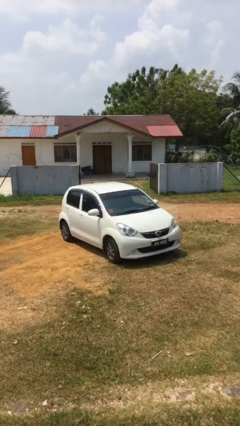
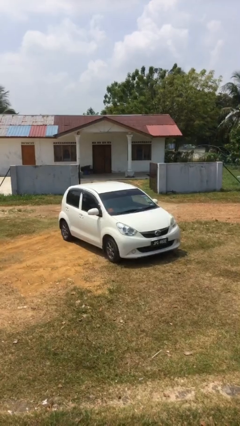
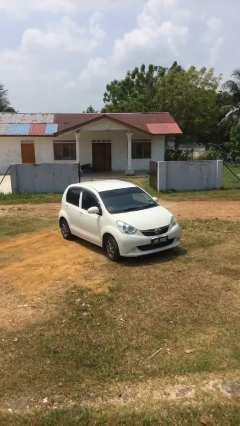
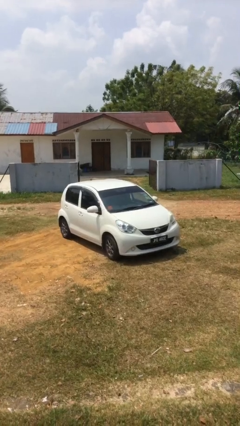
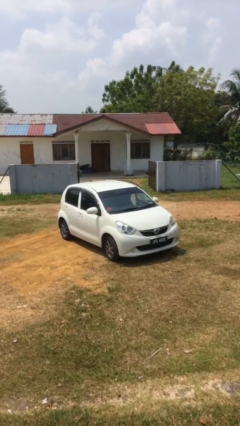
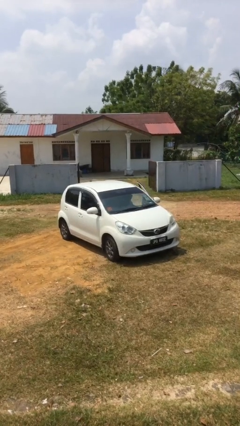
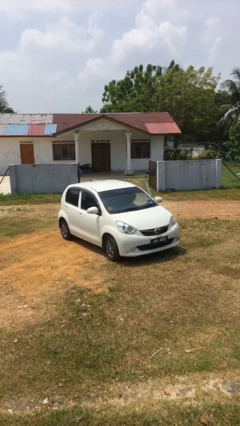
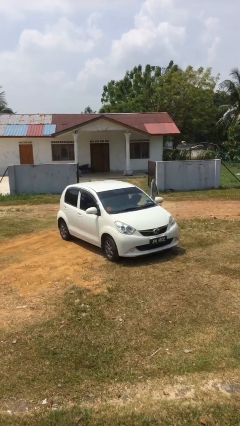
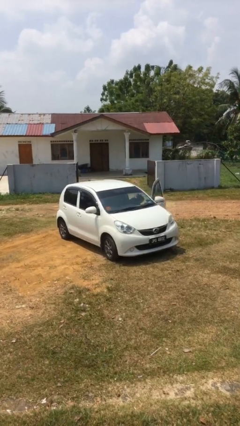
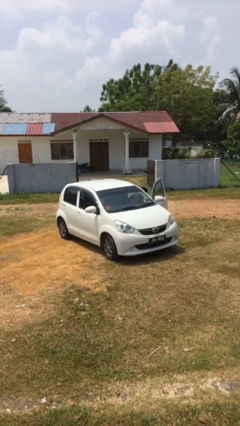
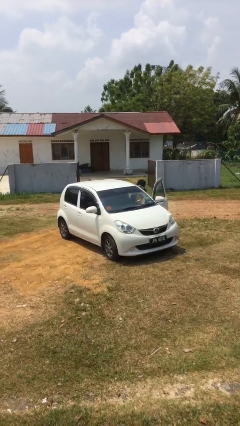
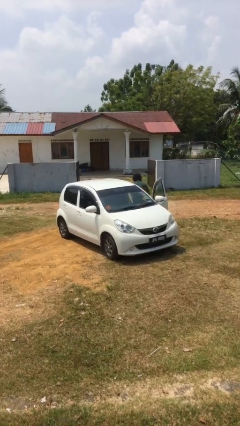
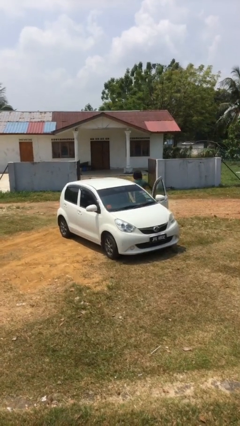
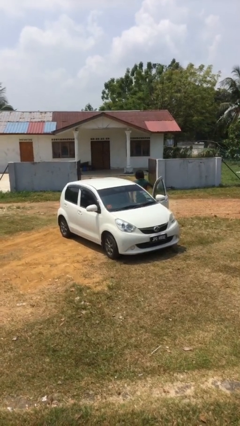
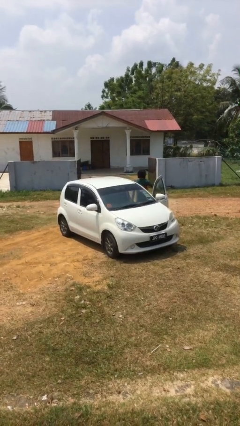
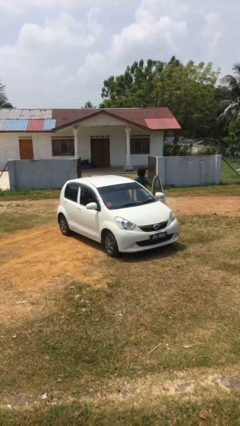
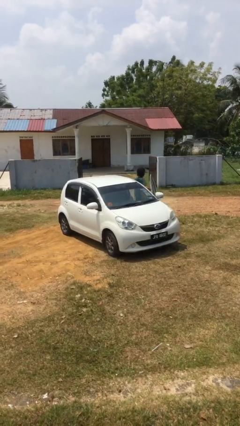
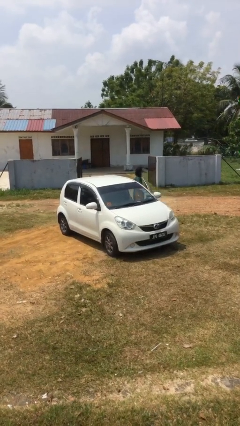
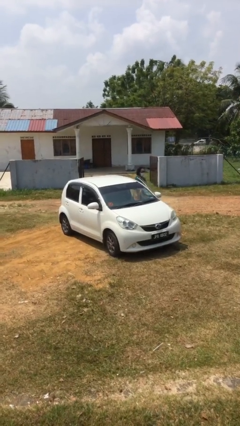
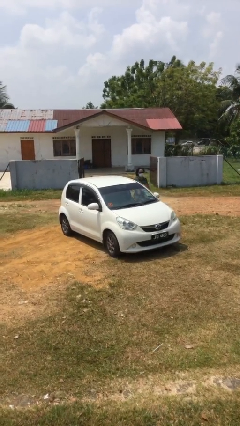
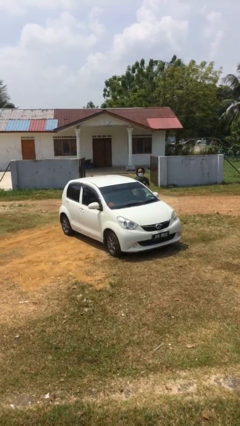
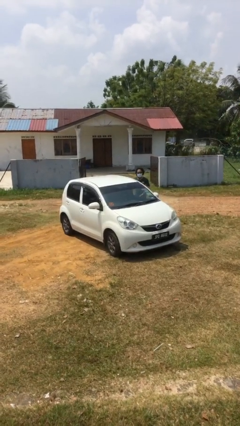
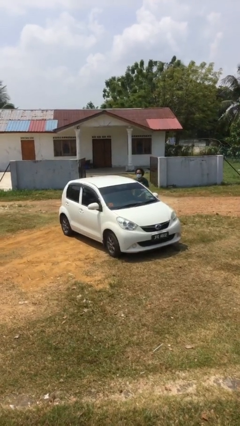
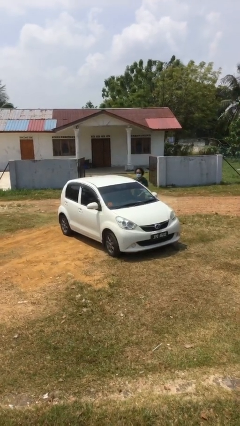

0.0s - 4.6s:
car drops off person

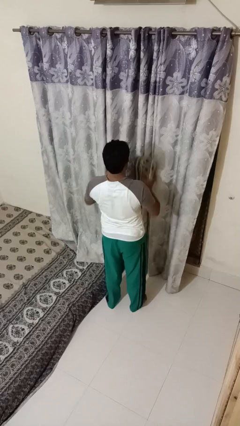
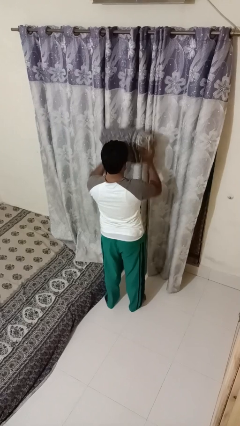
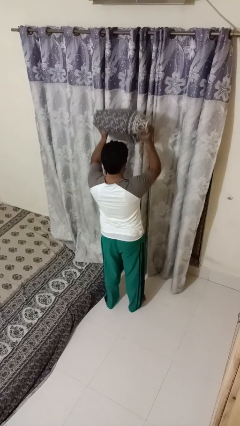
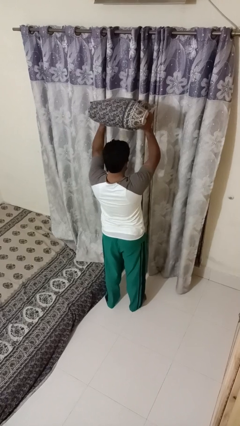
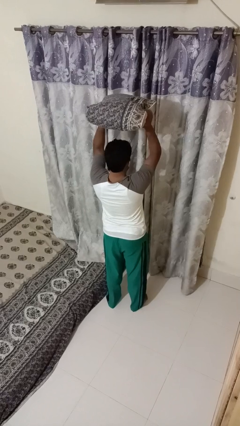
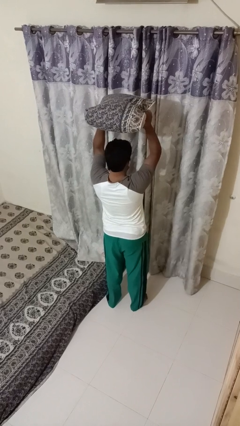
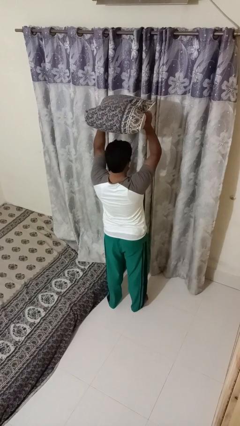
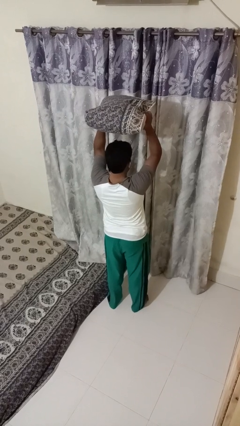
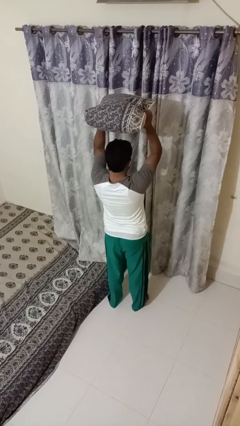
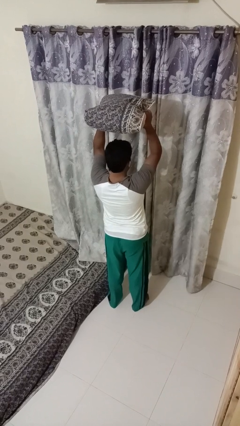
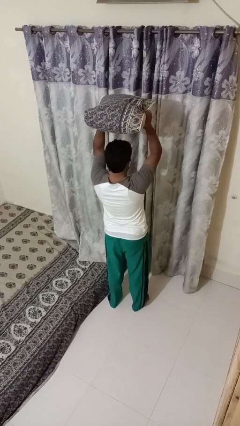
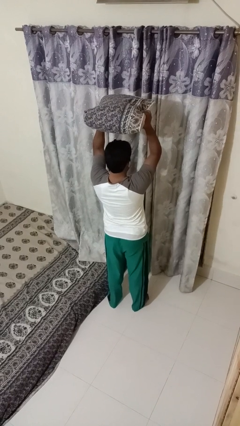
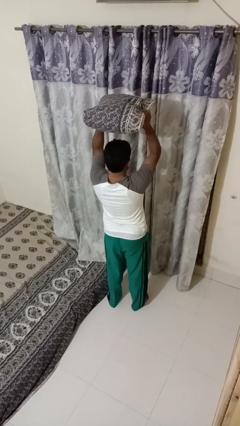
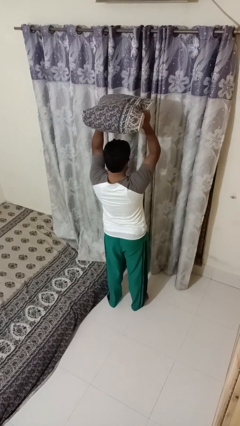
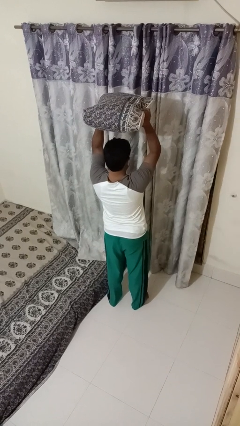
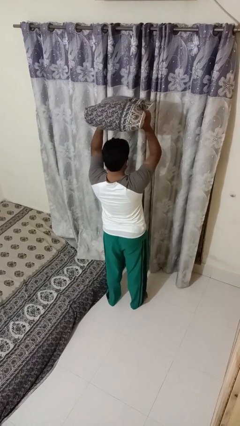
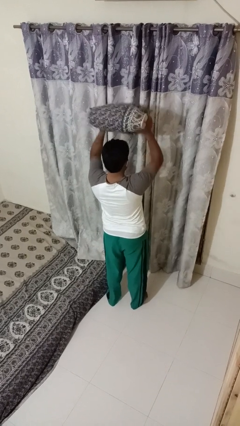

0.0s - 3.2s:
person holds object above head

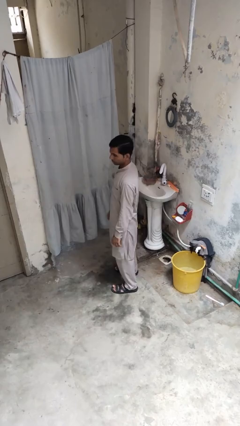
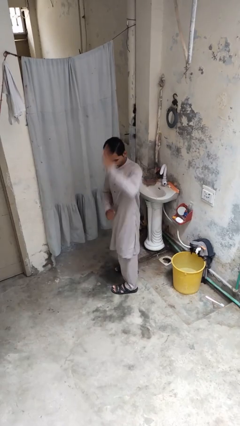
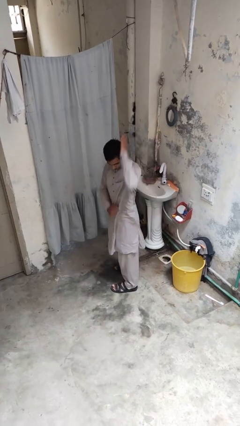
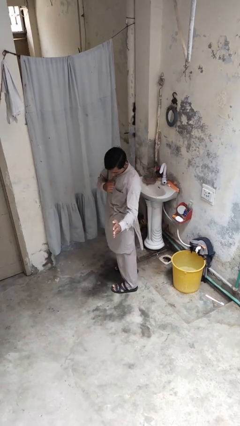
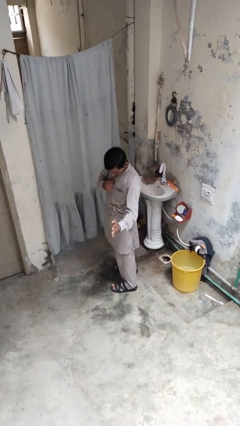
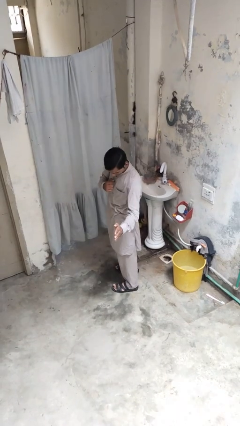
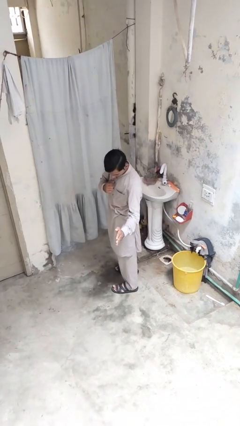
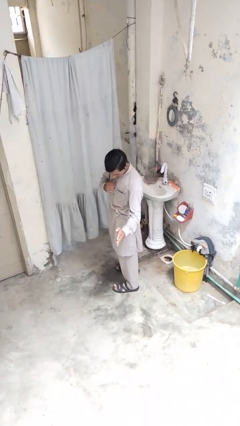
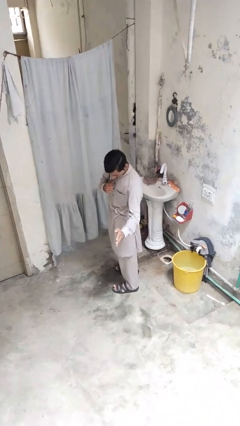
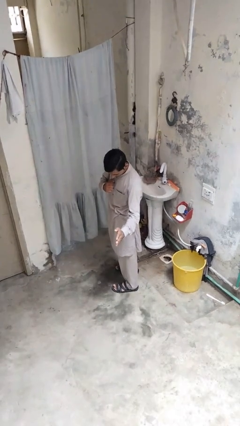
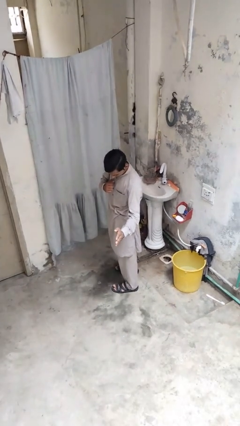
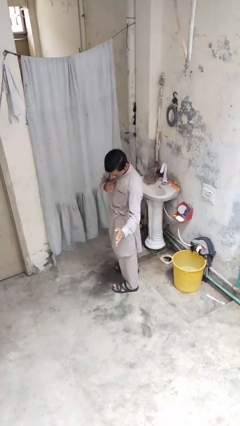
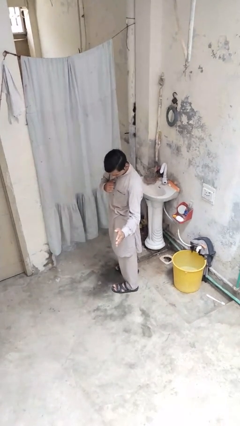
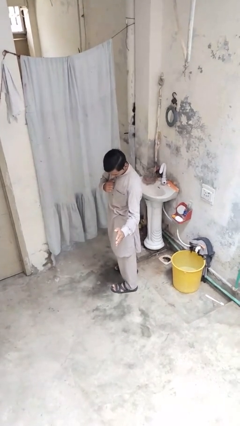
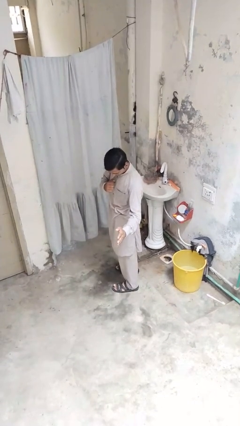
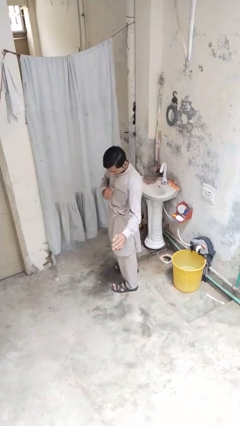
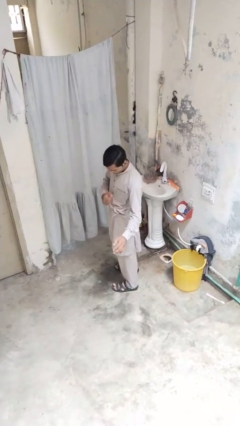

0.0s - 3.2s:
person karate chop

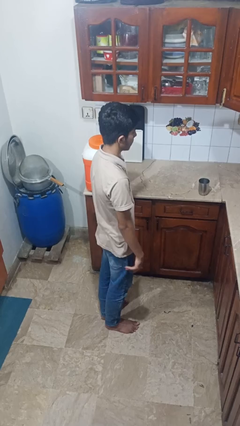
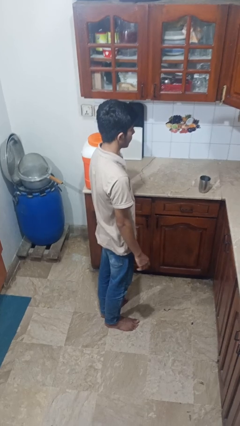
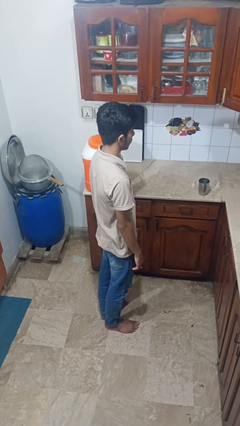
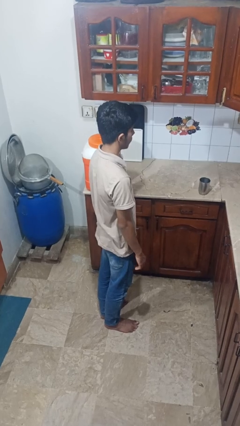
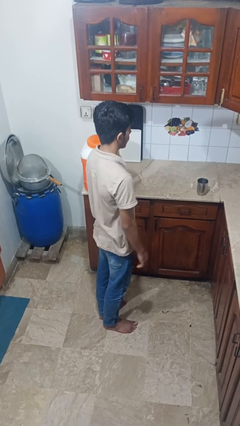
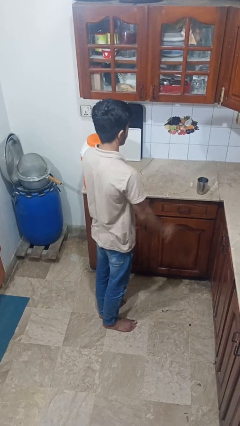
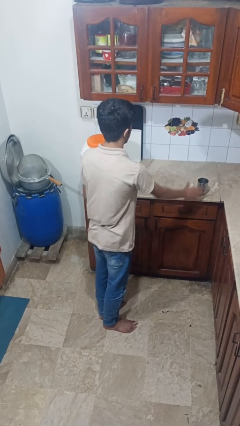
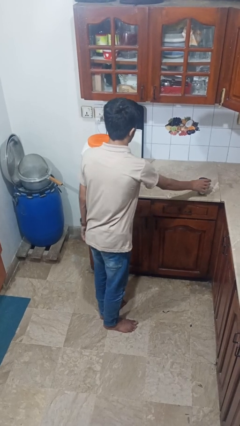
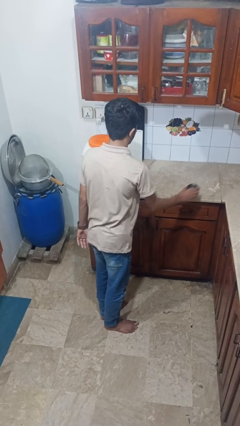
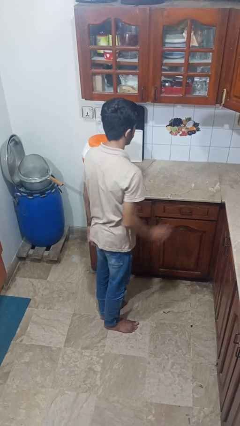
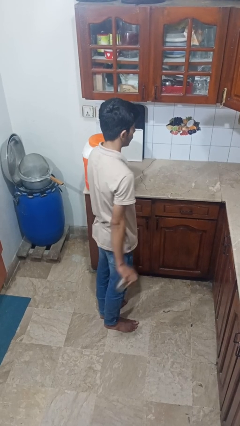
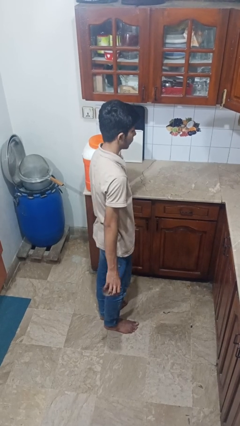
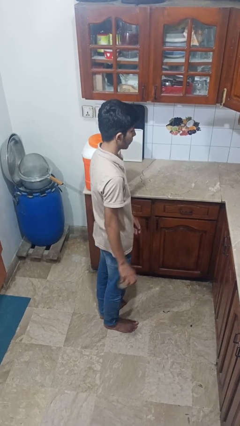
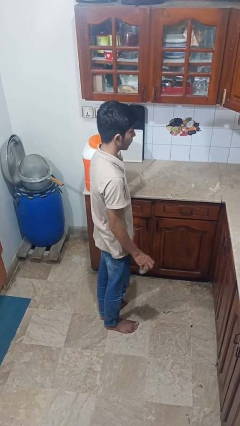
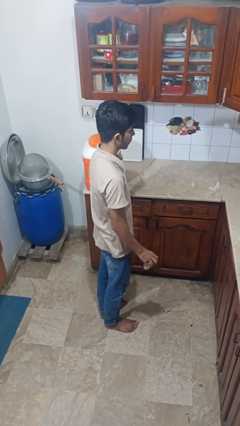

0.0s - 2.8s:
person picks up object from countertop

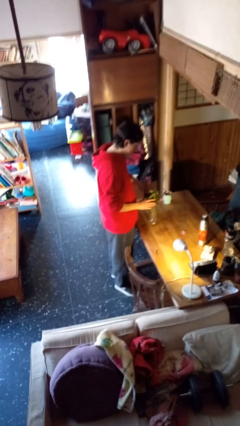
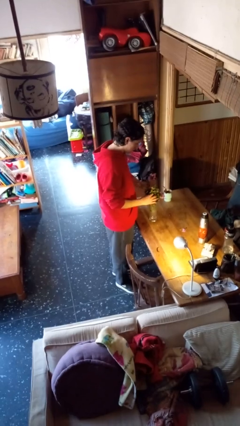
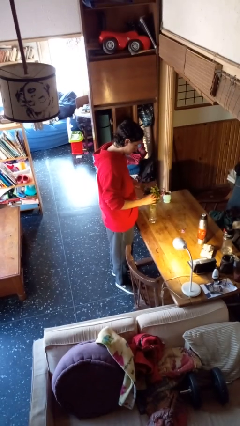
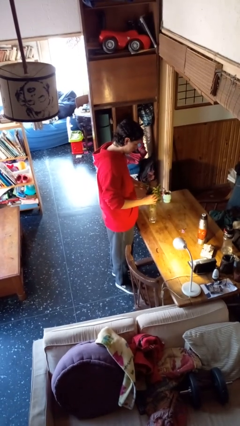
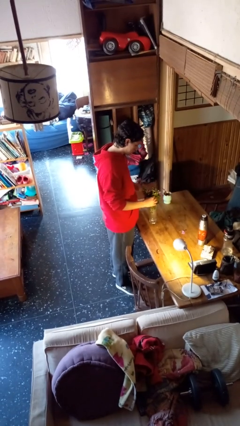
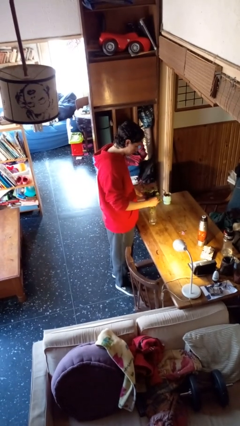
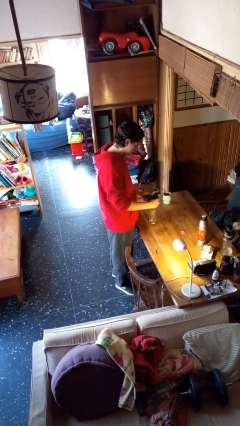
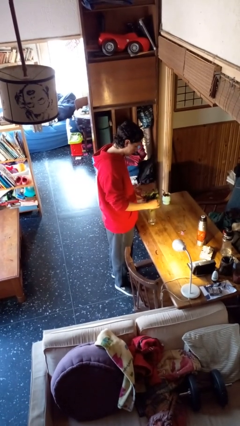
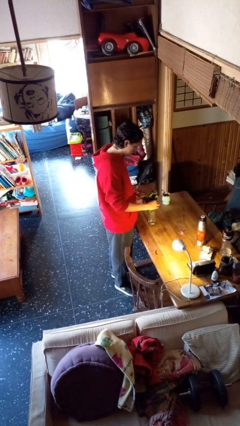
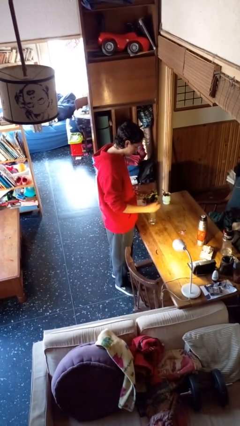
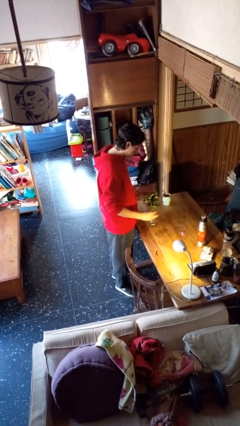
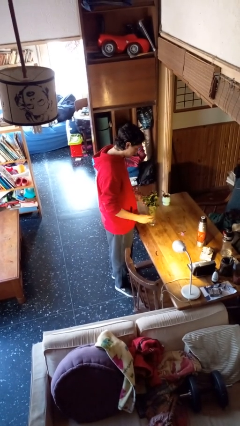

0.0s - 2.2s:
person arranges flowers in vase

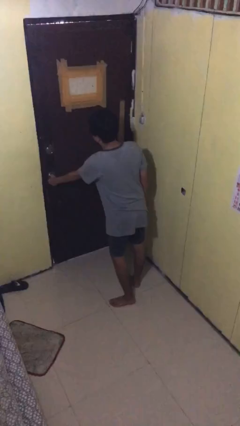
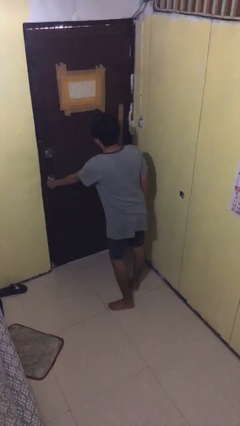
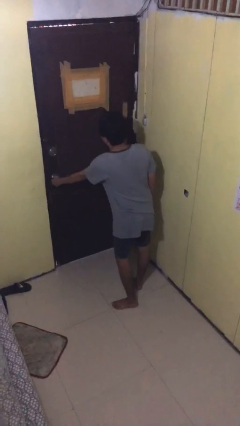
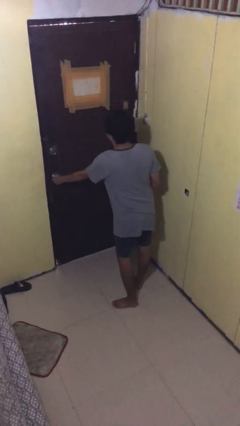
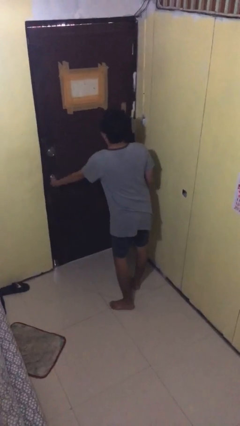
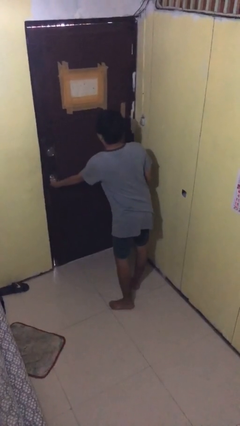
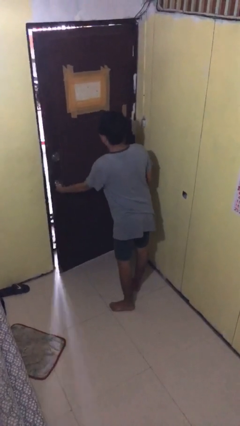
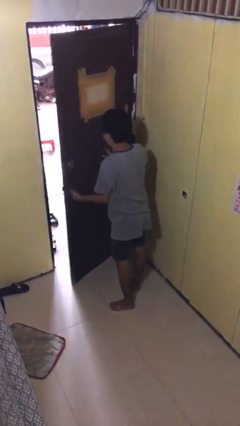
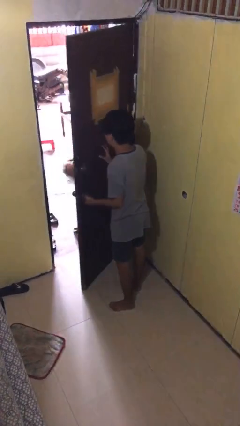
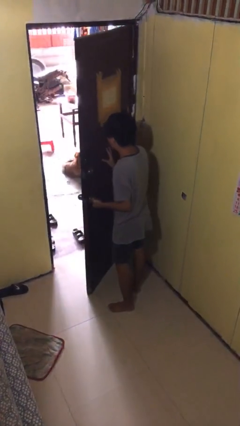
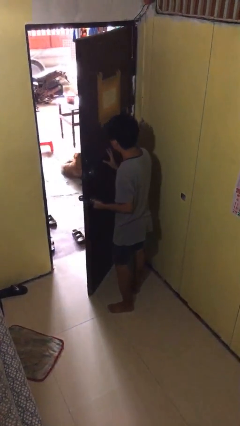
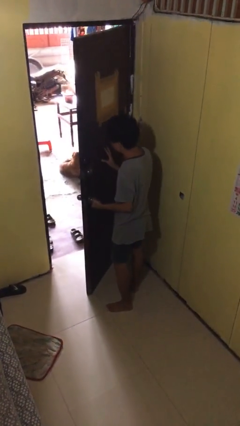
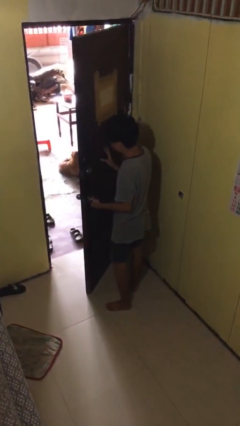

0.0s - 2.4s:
person opens facility door
